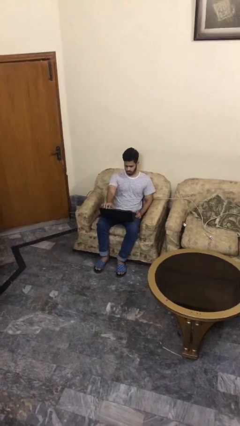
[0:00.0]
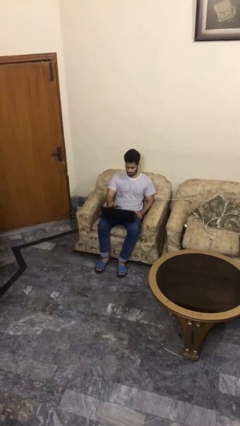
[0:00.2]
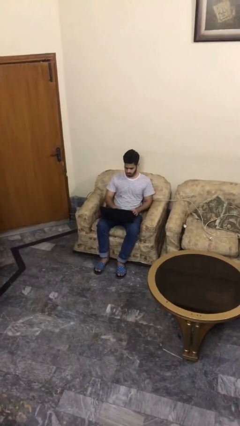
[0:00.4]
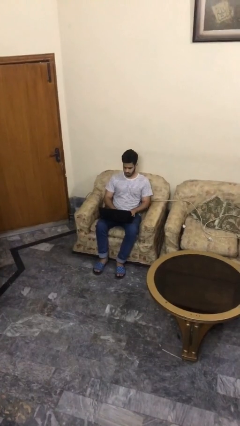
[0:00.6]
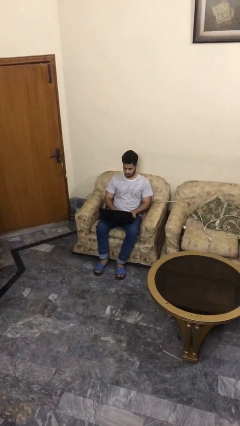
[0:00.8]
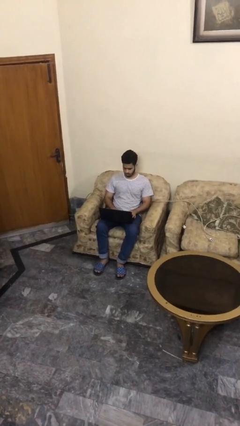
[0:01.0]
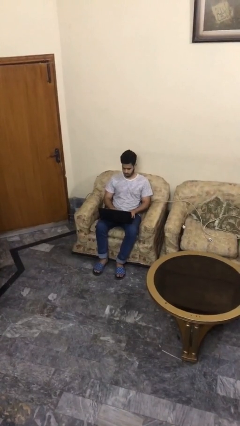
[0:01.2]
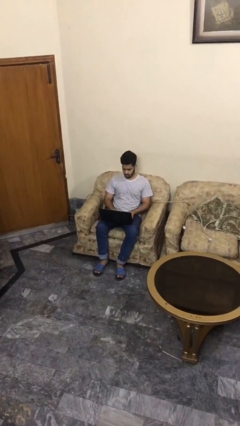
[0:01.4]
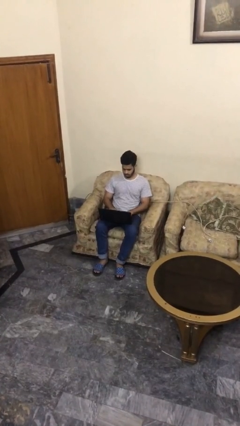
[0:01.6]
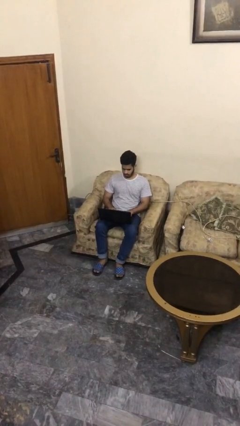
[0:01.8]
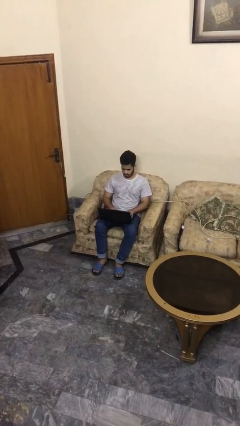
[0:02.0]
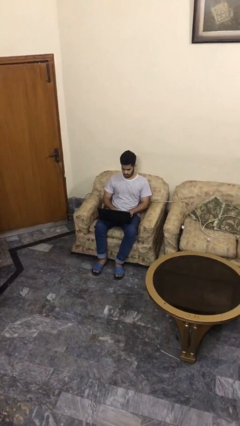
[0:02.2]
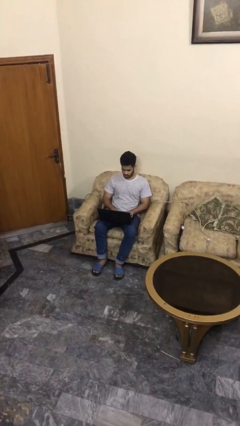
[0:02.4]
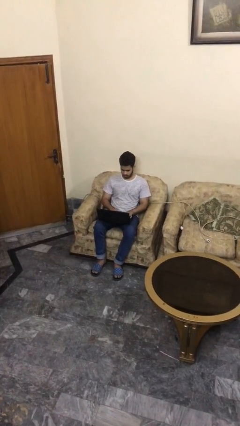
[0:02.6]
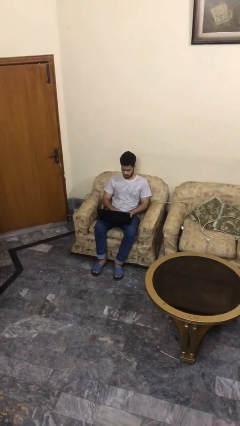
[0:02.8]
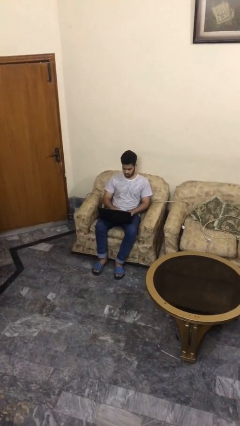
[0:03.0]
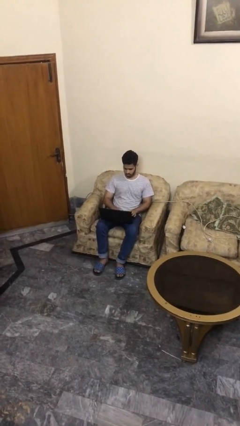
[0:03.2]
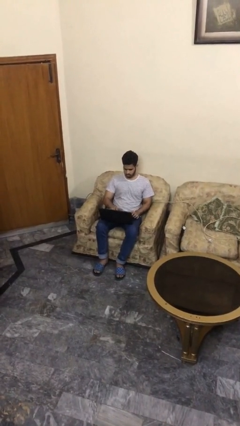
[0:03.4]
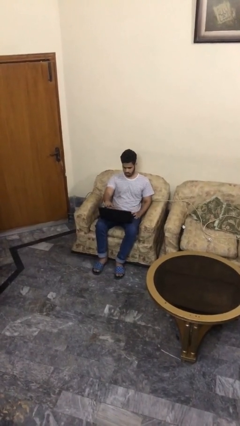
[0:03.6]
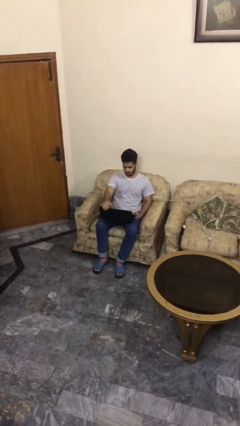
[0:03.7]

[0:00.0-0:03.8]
person interacts with laptop

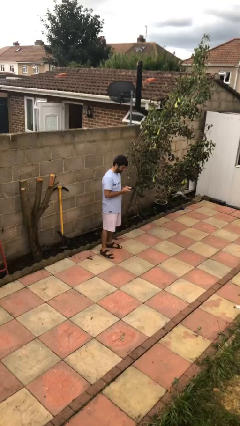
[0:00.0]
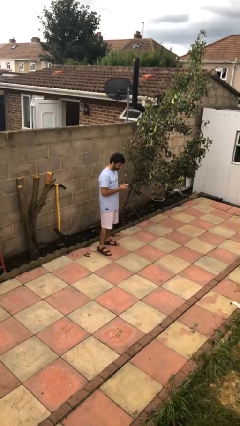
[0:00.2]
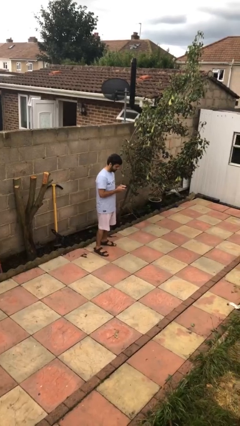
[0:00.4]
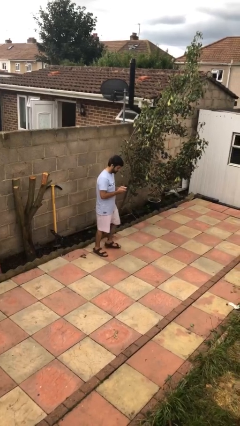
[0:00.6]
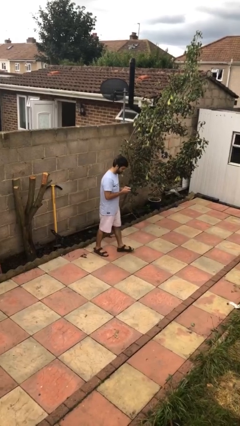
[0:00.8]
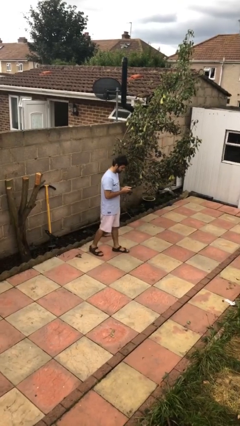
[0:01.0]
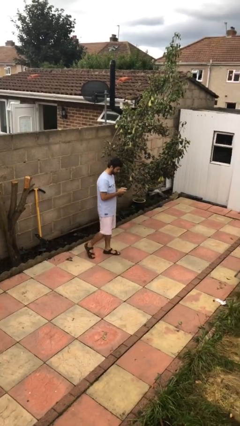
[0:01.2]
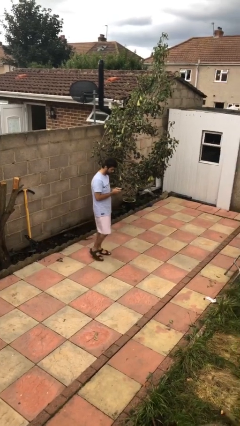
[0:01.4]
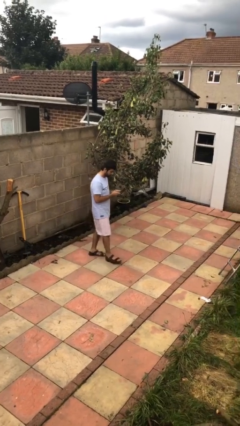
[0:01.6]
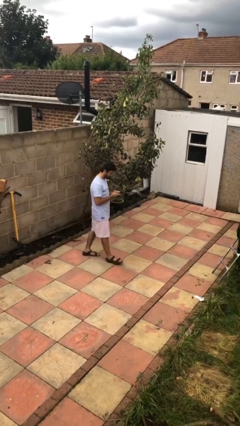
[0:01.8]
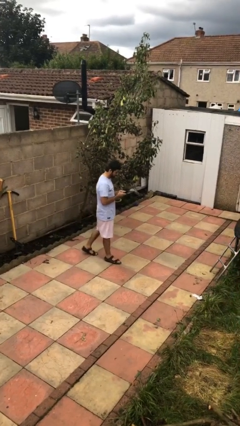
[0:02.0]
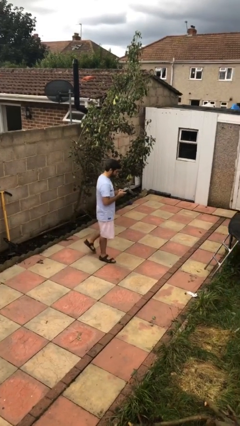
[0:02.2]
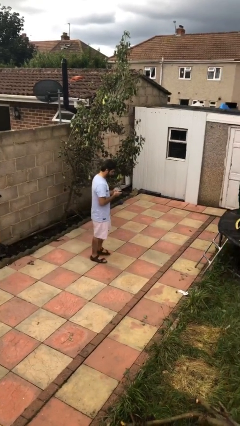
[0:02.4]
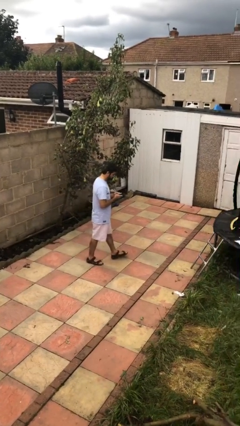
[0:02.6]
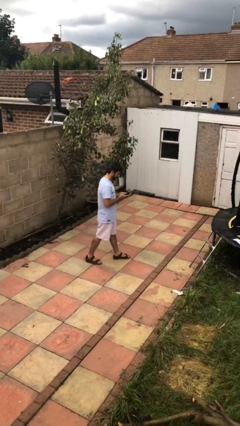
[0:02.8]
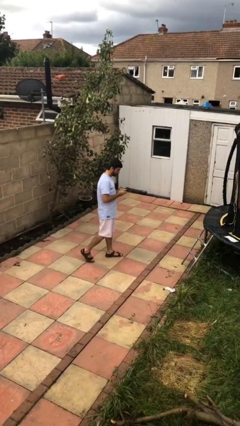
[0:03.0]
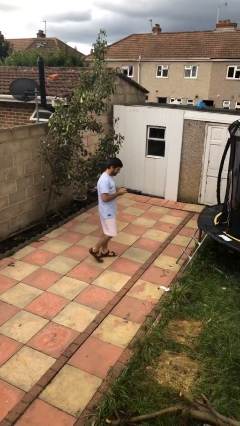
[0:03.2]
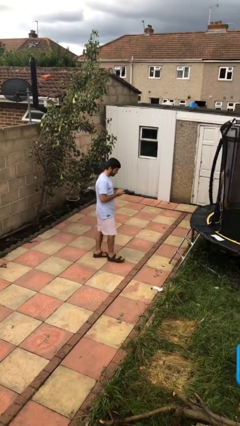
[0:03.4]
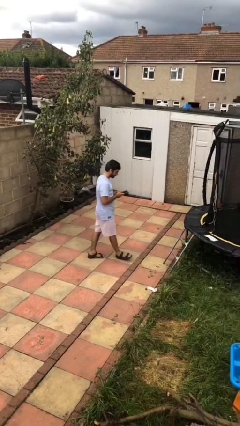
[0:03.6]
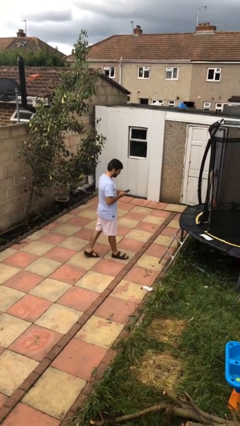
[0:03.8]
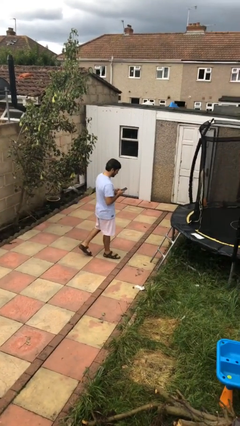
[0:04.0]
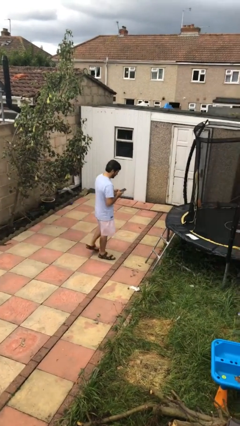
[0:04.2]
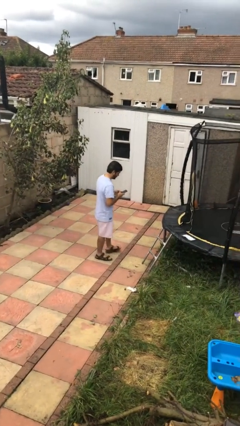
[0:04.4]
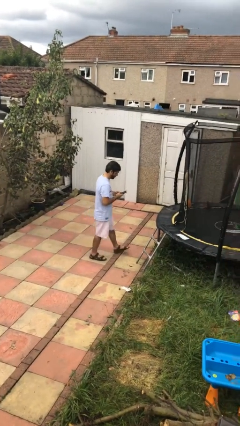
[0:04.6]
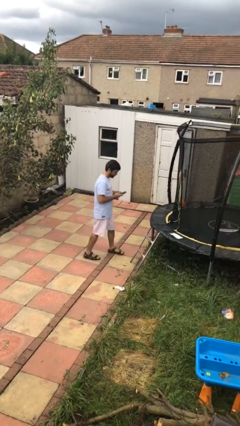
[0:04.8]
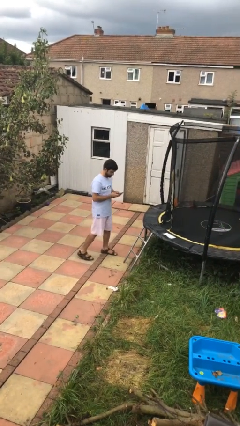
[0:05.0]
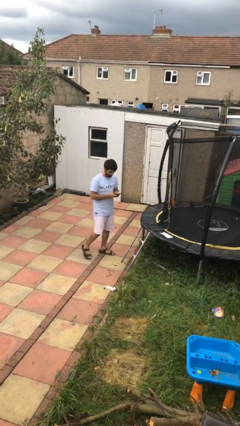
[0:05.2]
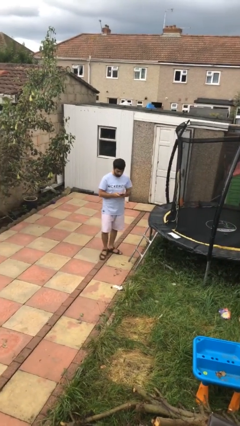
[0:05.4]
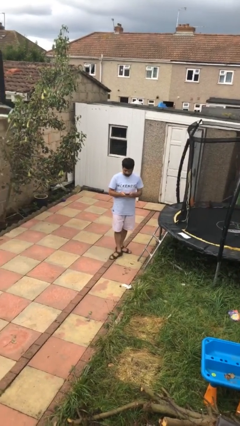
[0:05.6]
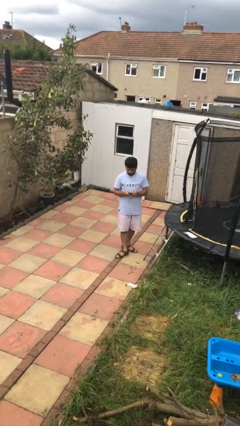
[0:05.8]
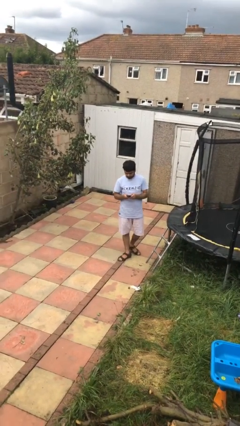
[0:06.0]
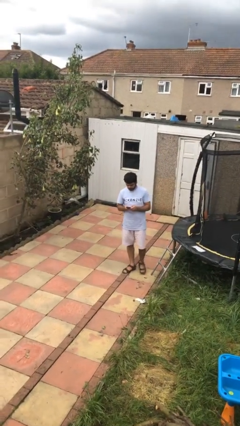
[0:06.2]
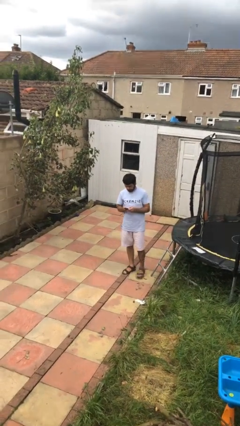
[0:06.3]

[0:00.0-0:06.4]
person texts on phone

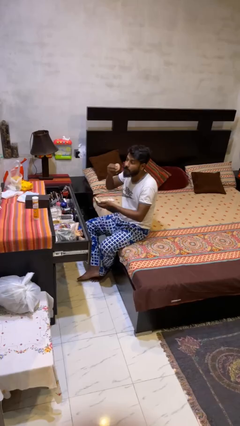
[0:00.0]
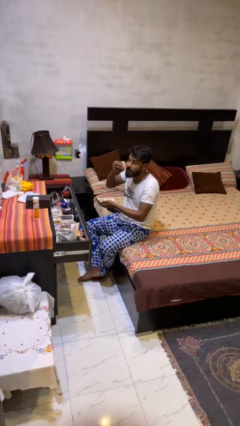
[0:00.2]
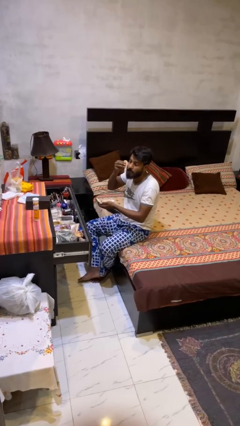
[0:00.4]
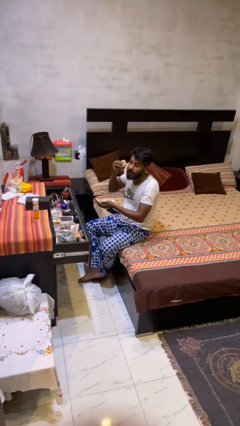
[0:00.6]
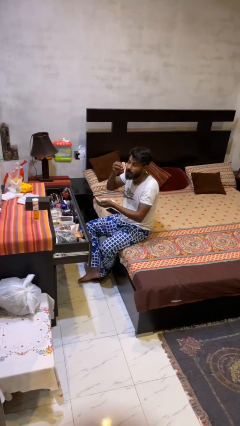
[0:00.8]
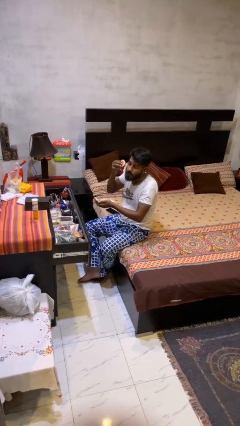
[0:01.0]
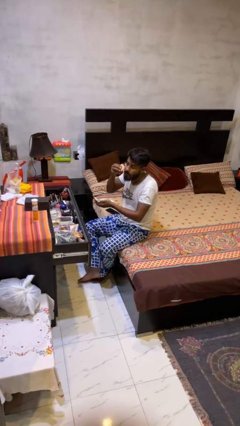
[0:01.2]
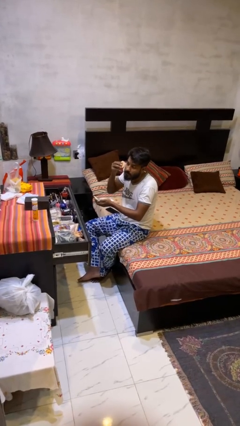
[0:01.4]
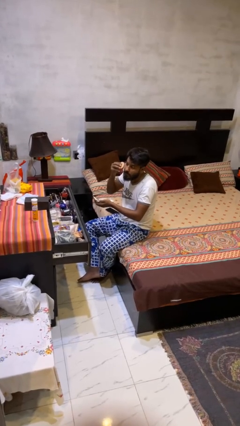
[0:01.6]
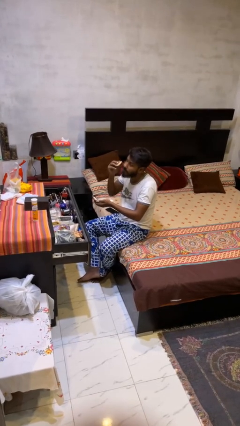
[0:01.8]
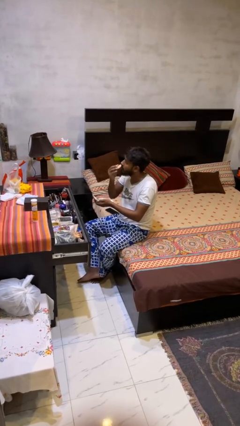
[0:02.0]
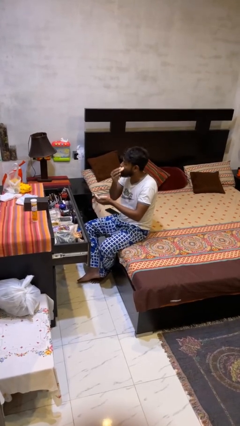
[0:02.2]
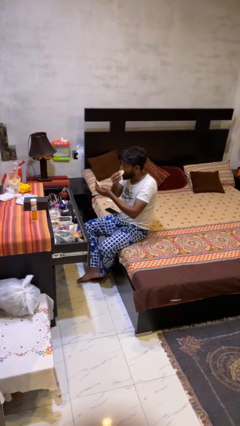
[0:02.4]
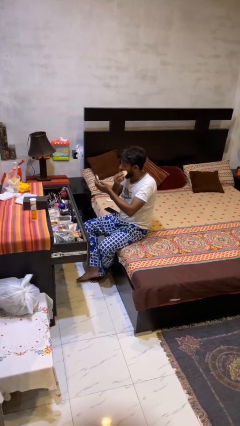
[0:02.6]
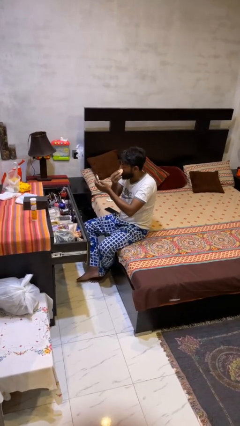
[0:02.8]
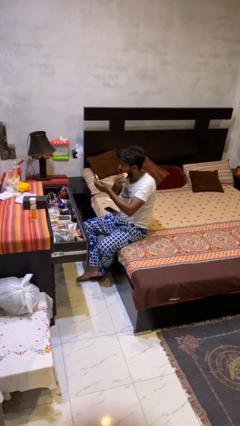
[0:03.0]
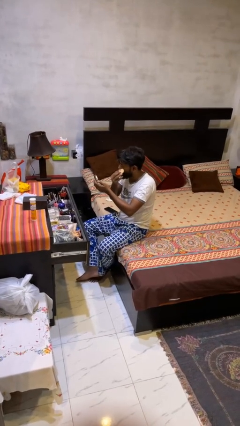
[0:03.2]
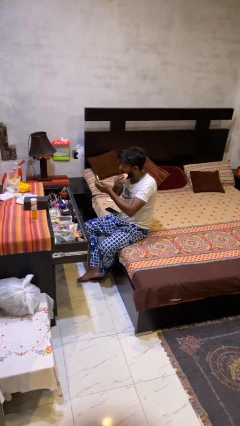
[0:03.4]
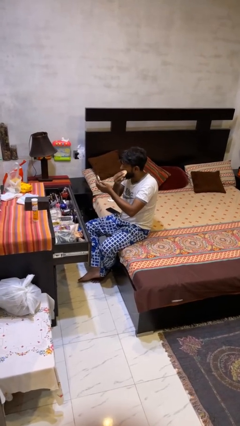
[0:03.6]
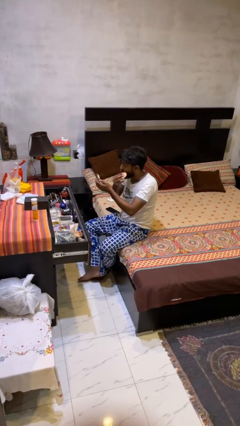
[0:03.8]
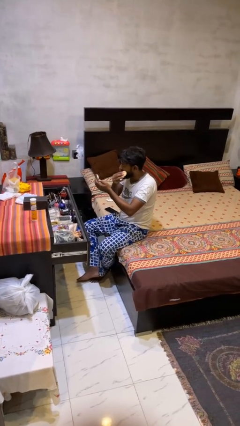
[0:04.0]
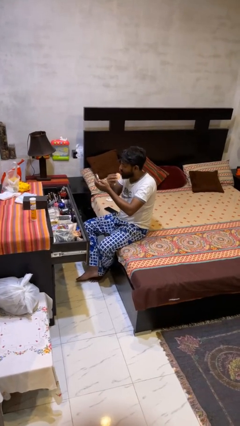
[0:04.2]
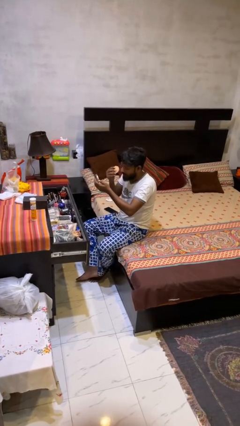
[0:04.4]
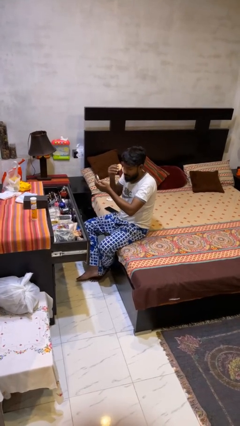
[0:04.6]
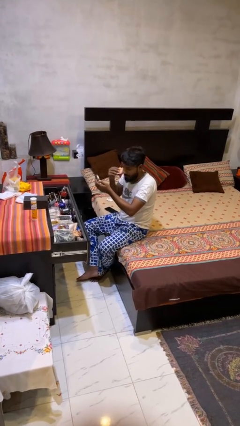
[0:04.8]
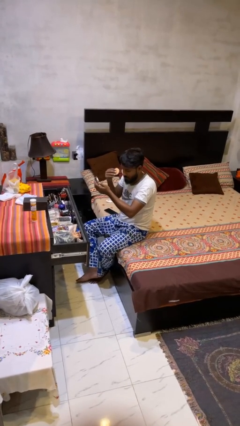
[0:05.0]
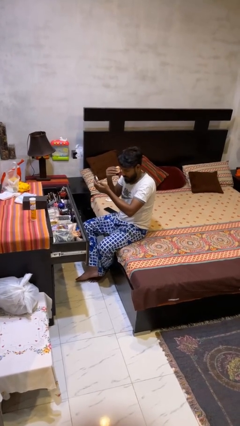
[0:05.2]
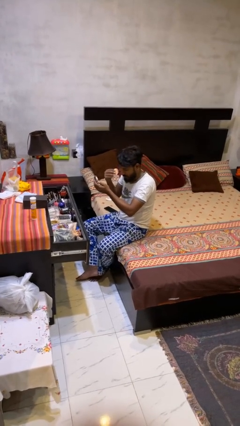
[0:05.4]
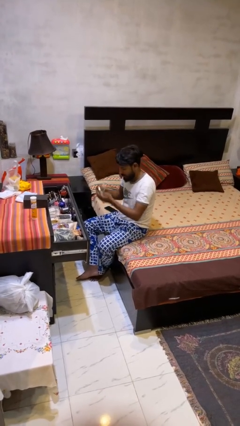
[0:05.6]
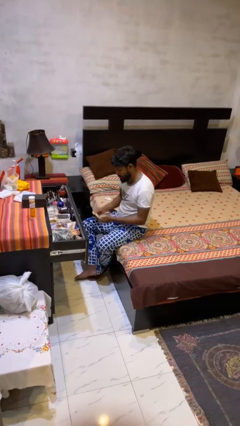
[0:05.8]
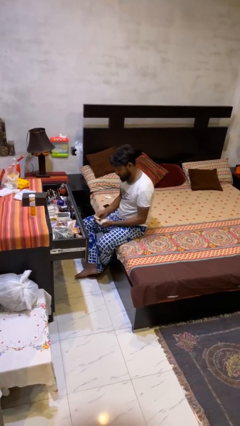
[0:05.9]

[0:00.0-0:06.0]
person applies foundation makeup

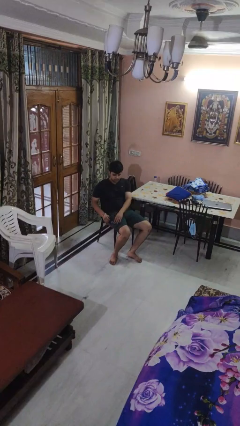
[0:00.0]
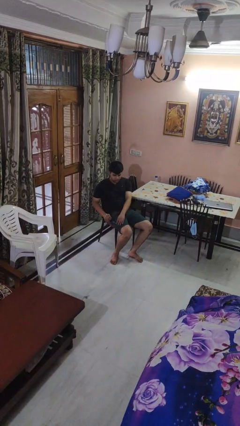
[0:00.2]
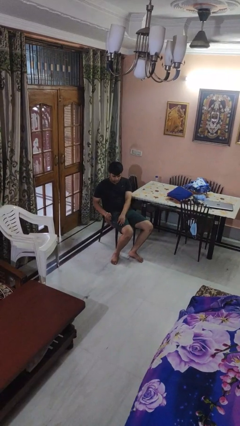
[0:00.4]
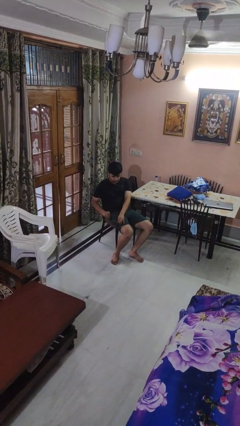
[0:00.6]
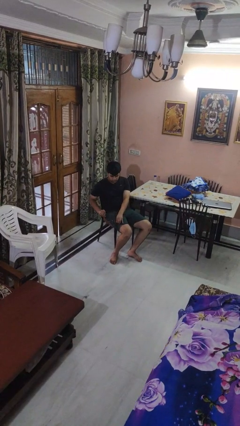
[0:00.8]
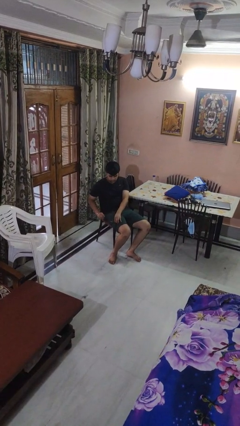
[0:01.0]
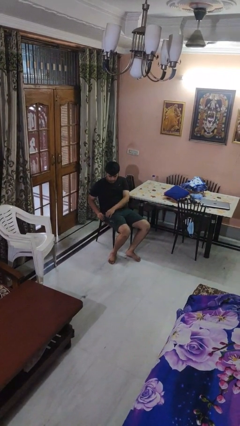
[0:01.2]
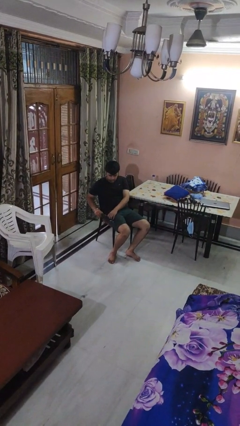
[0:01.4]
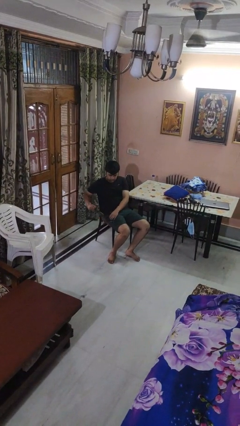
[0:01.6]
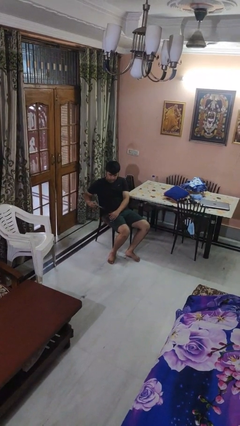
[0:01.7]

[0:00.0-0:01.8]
person takes phone from pocket
